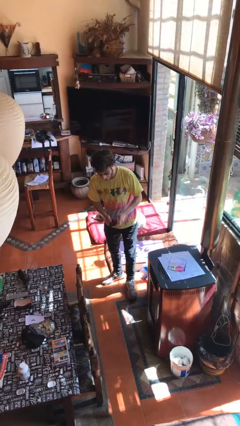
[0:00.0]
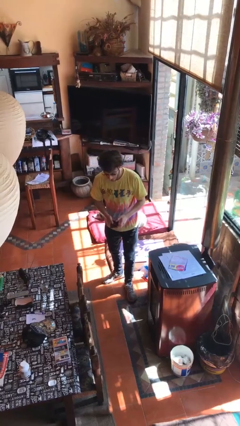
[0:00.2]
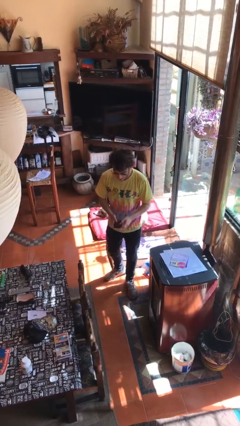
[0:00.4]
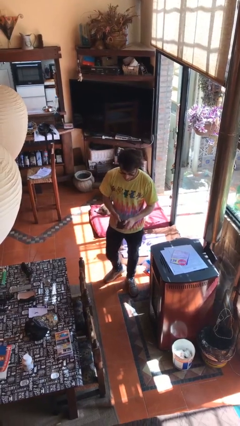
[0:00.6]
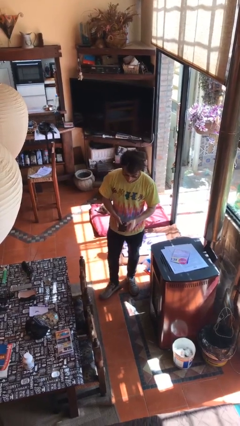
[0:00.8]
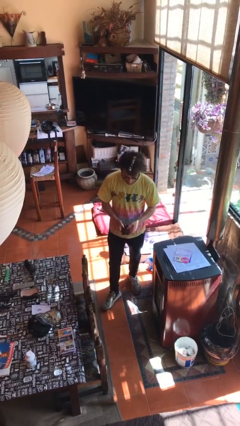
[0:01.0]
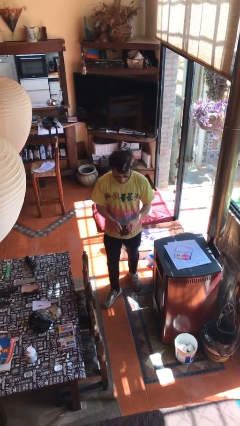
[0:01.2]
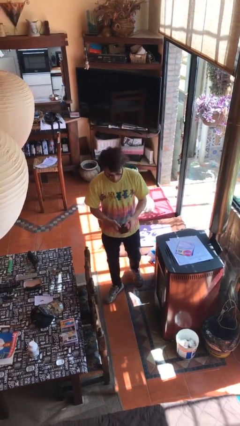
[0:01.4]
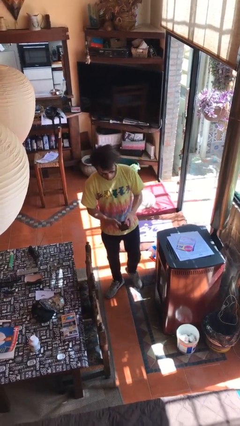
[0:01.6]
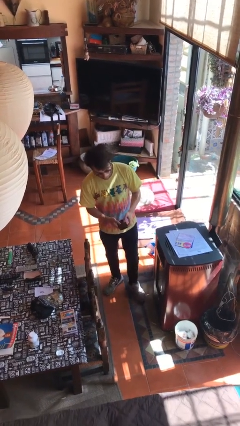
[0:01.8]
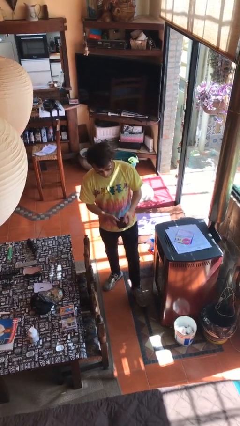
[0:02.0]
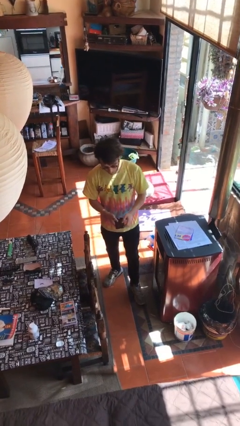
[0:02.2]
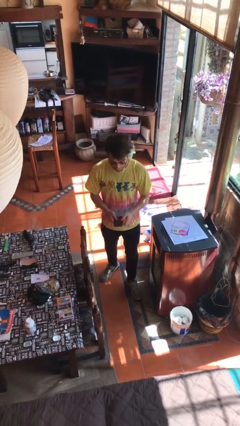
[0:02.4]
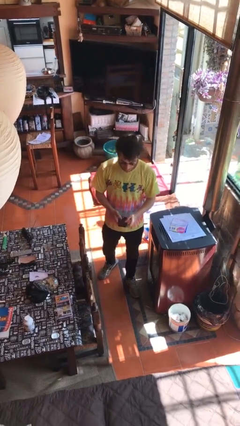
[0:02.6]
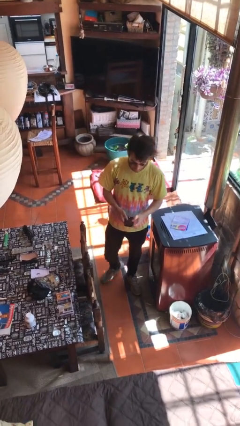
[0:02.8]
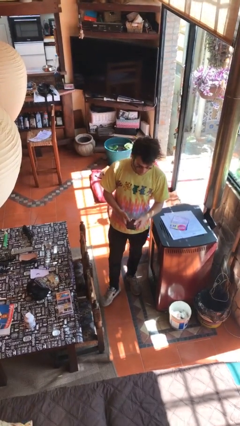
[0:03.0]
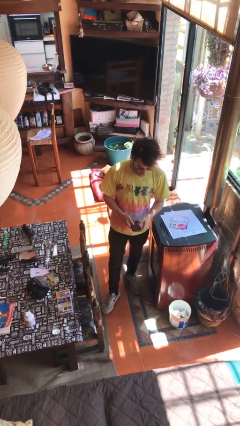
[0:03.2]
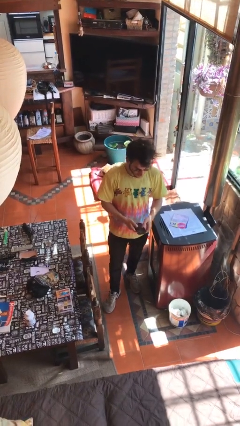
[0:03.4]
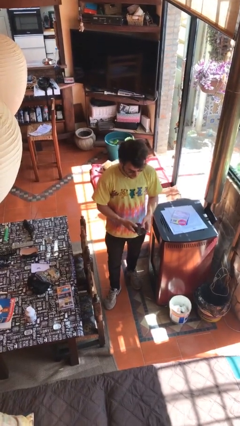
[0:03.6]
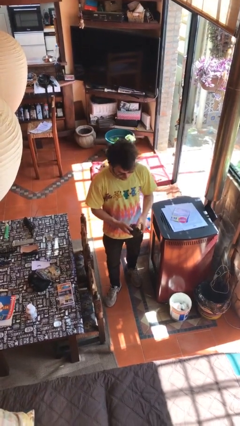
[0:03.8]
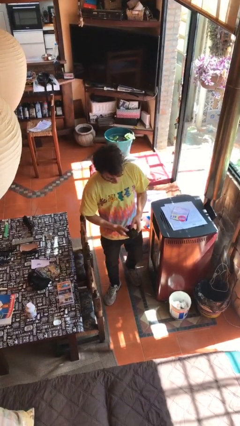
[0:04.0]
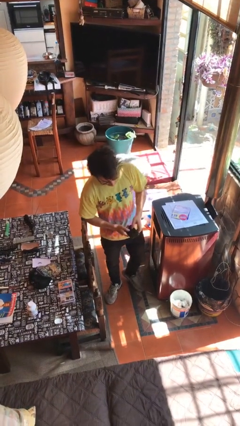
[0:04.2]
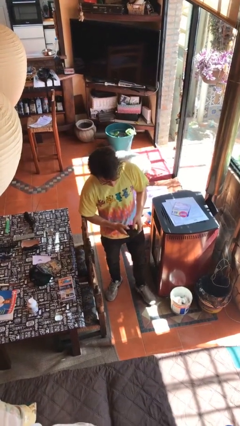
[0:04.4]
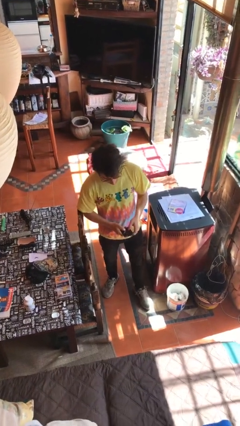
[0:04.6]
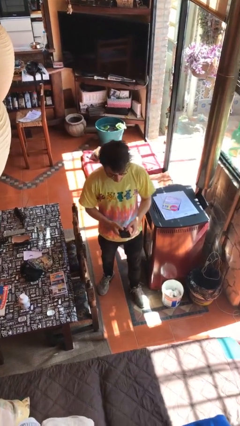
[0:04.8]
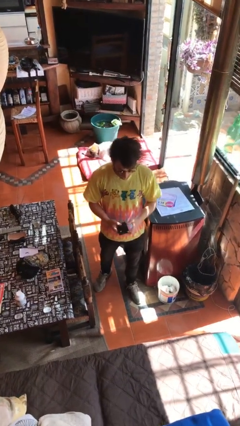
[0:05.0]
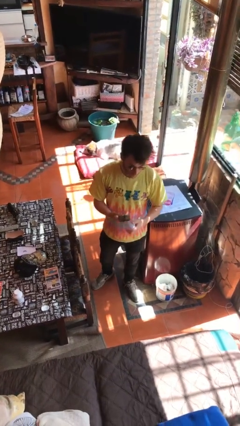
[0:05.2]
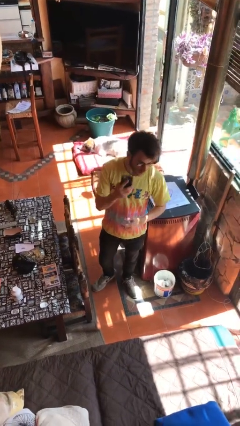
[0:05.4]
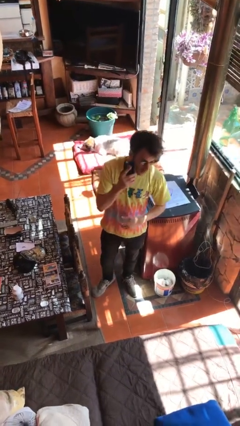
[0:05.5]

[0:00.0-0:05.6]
person texts on phone

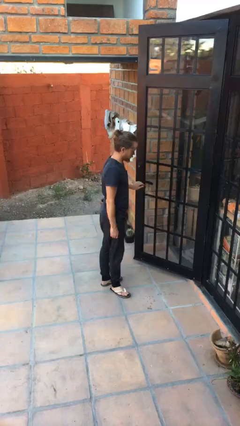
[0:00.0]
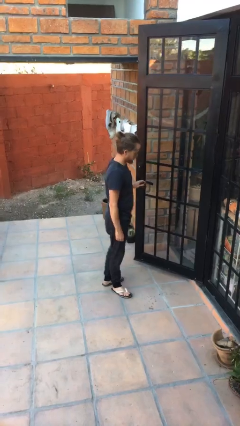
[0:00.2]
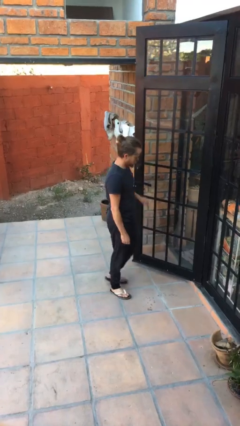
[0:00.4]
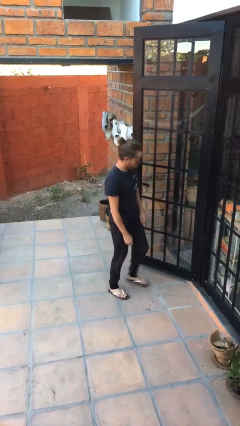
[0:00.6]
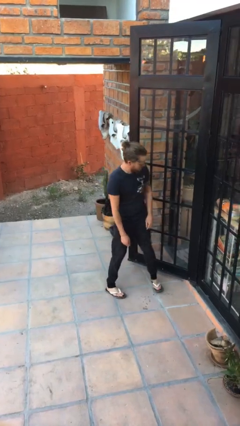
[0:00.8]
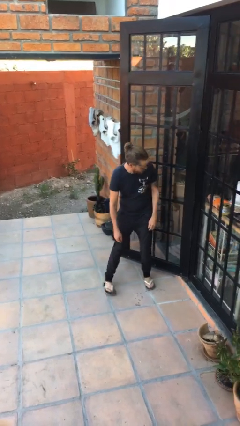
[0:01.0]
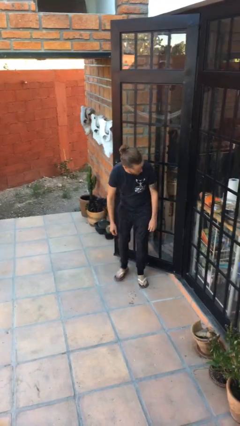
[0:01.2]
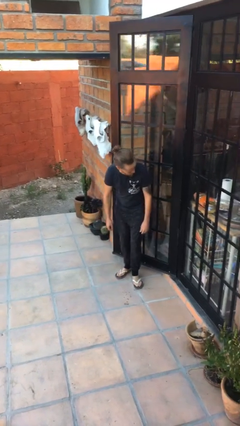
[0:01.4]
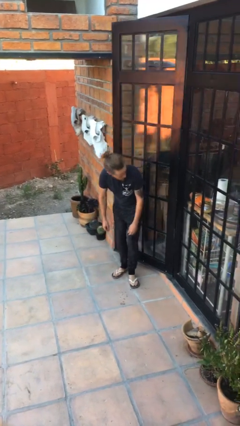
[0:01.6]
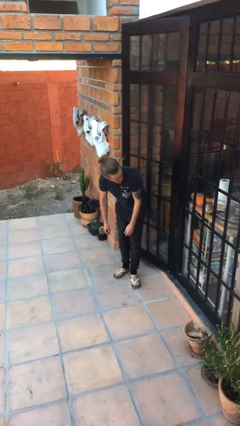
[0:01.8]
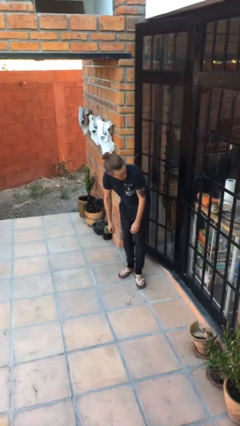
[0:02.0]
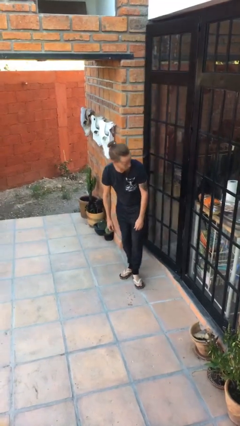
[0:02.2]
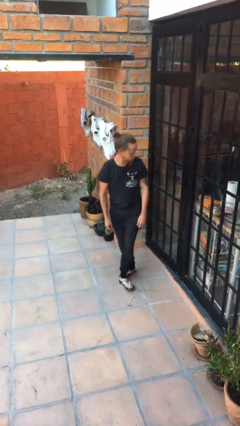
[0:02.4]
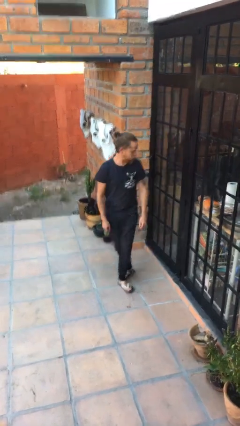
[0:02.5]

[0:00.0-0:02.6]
person closes door with hip

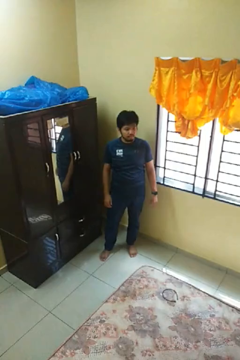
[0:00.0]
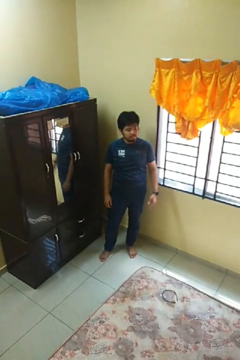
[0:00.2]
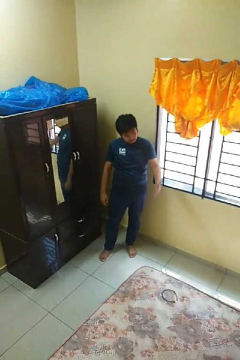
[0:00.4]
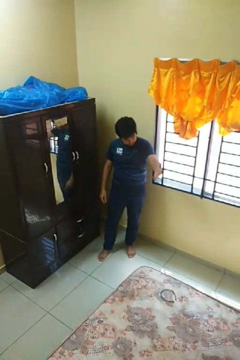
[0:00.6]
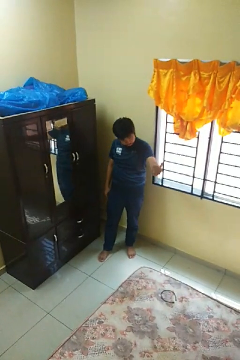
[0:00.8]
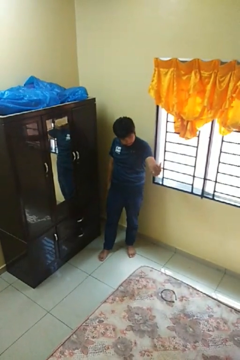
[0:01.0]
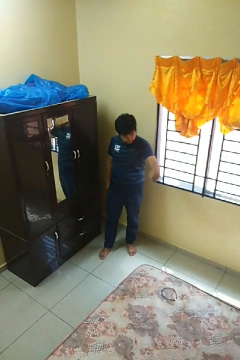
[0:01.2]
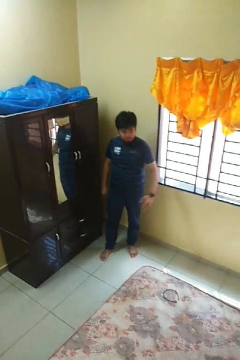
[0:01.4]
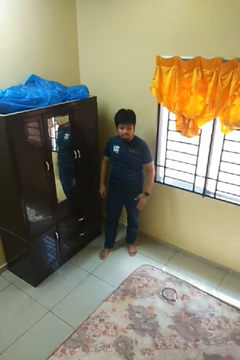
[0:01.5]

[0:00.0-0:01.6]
person gestures come here

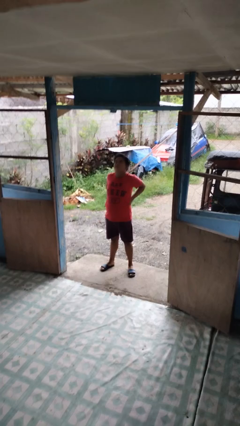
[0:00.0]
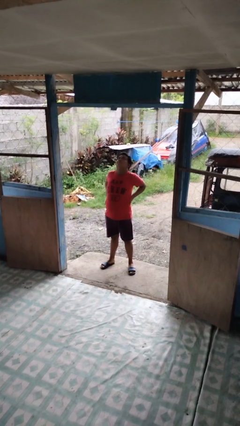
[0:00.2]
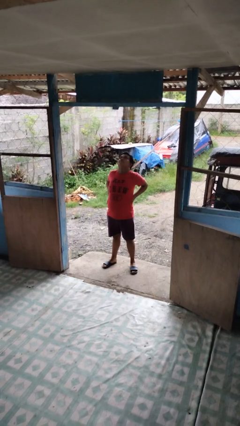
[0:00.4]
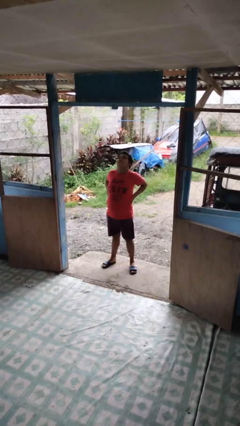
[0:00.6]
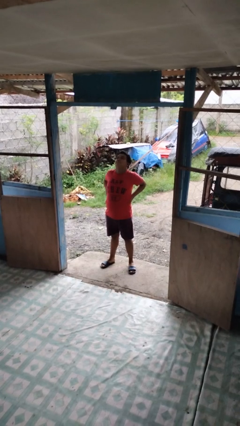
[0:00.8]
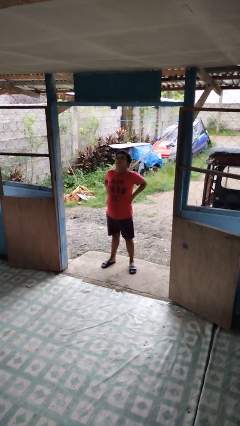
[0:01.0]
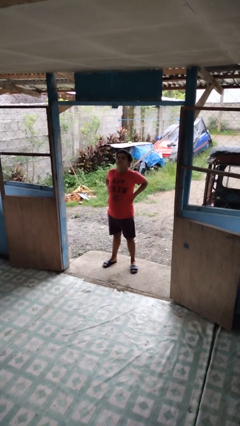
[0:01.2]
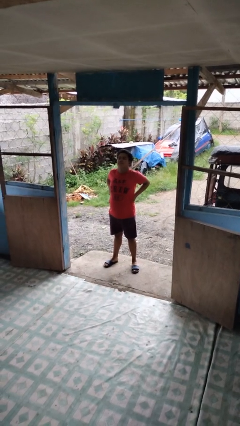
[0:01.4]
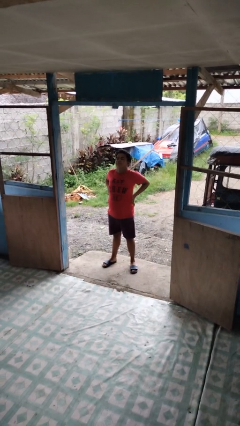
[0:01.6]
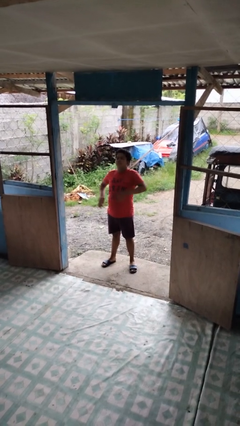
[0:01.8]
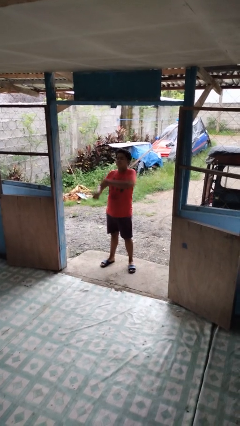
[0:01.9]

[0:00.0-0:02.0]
person stretches back

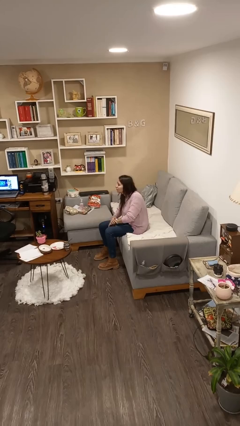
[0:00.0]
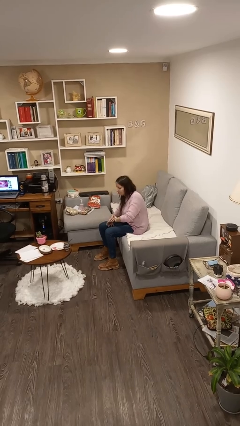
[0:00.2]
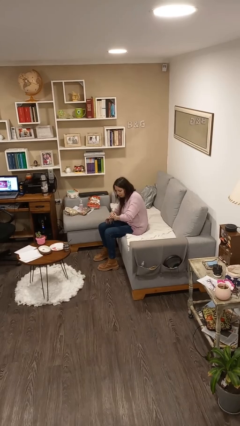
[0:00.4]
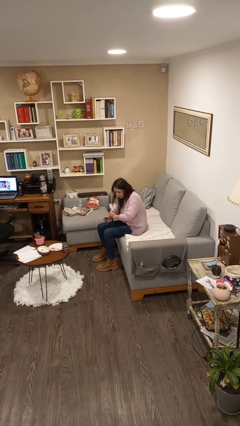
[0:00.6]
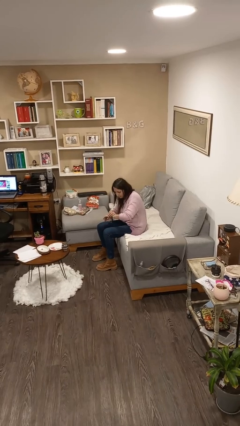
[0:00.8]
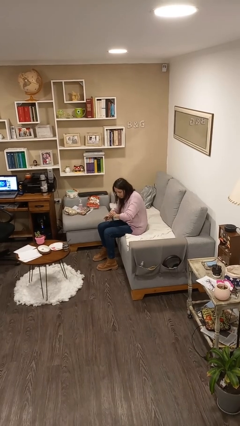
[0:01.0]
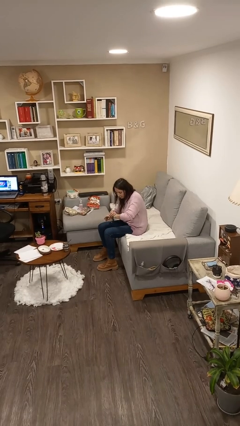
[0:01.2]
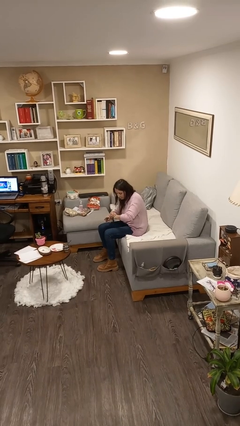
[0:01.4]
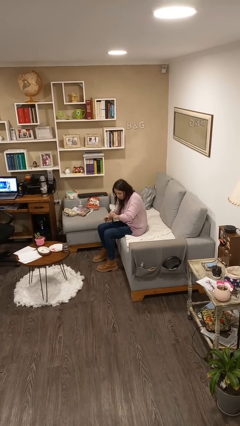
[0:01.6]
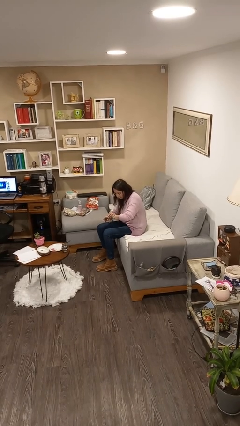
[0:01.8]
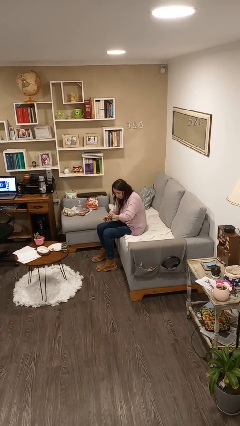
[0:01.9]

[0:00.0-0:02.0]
person looks at wristwatch

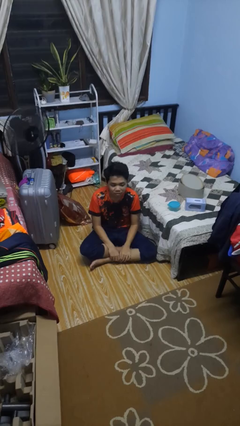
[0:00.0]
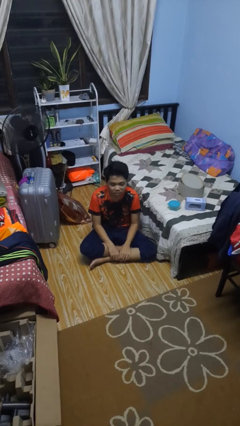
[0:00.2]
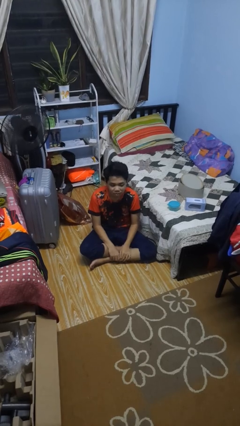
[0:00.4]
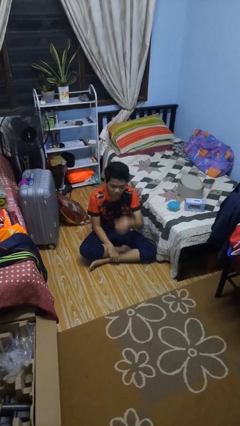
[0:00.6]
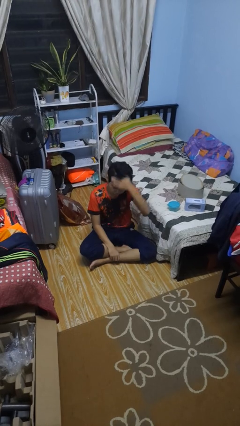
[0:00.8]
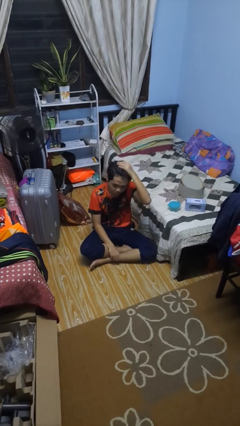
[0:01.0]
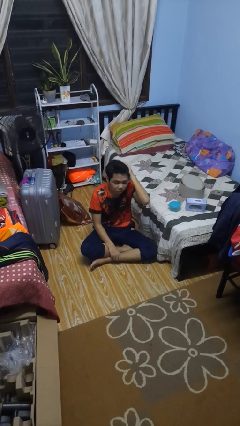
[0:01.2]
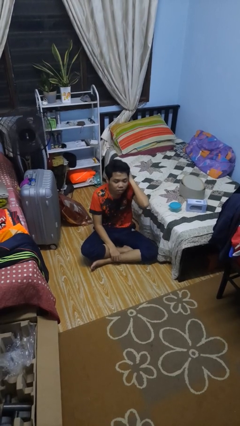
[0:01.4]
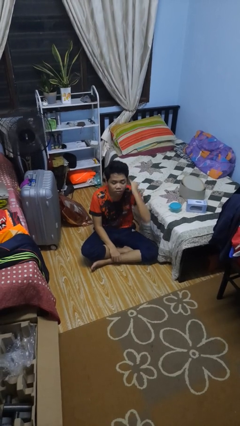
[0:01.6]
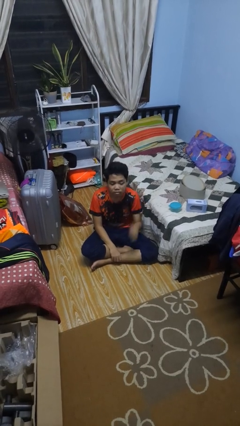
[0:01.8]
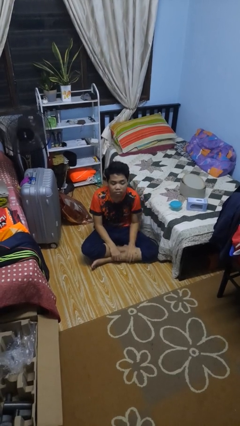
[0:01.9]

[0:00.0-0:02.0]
person strokes hair

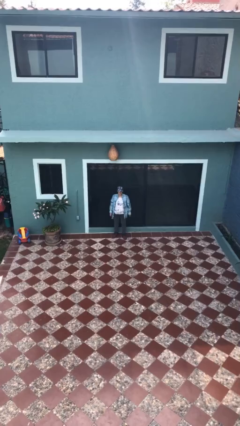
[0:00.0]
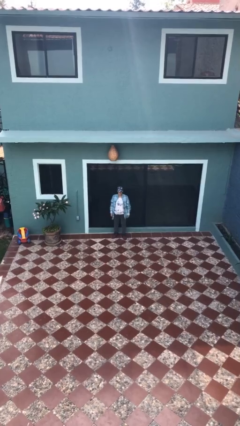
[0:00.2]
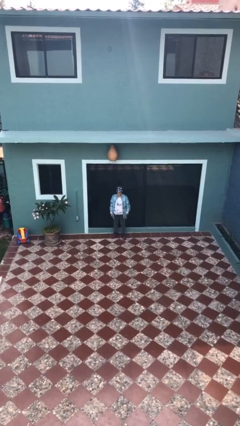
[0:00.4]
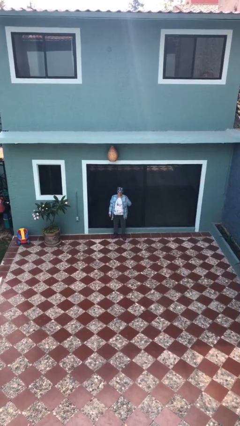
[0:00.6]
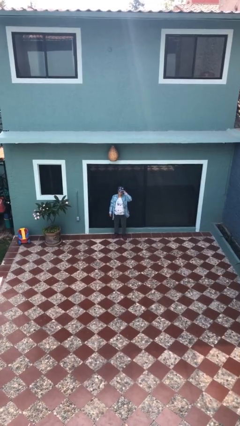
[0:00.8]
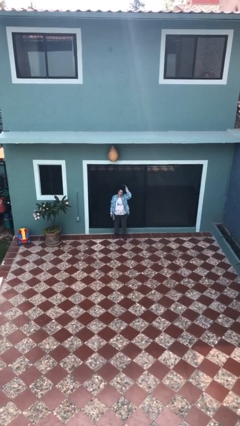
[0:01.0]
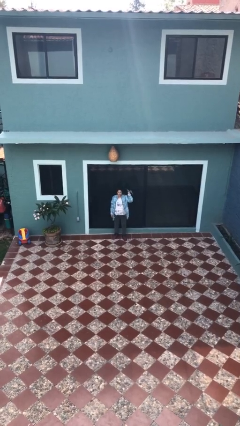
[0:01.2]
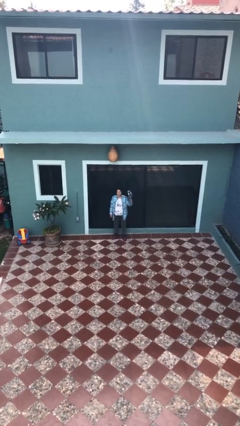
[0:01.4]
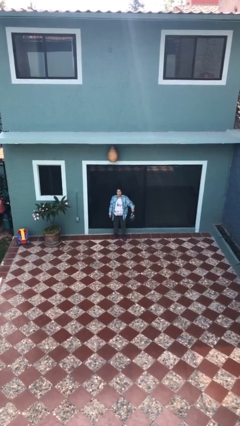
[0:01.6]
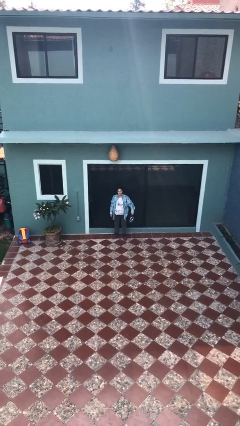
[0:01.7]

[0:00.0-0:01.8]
person takes off hat
